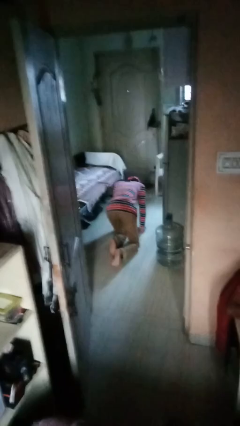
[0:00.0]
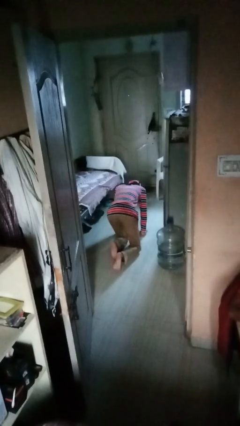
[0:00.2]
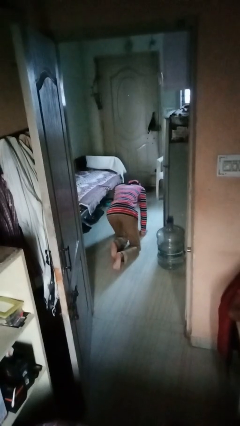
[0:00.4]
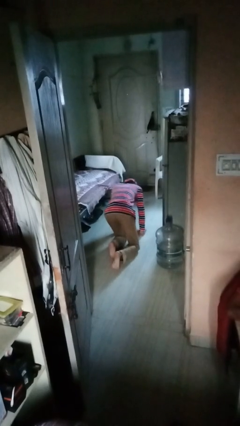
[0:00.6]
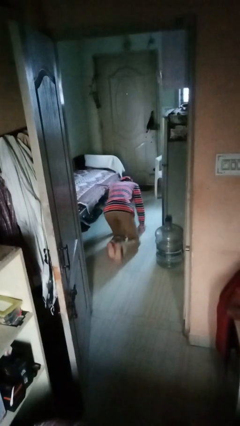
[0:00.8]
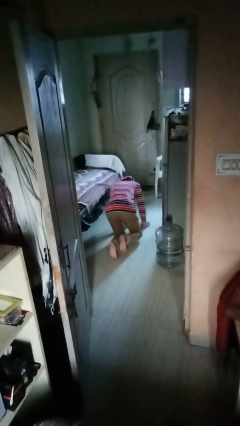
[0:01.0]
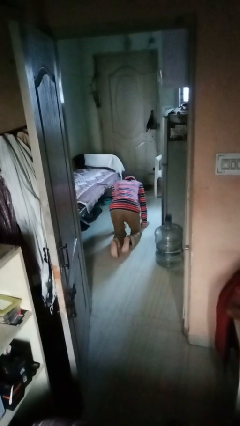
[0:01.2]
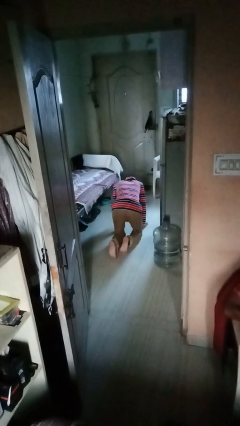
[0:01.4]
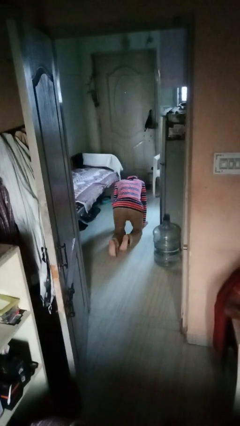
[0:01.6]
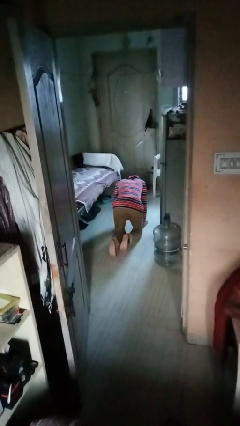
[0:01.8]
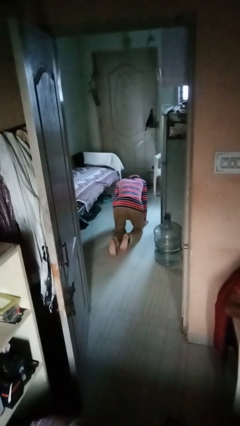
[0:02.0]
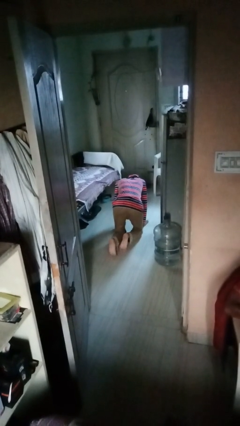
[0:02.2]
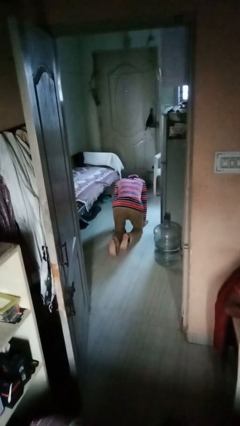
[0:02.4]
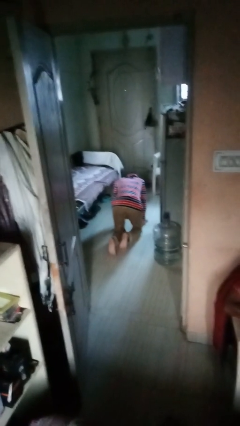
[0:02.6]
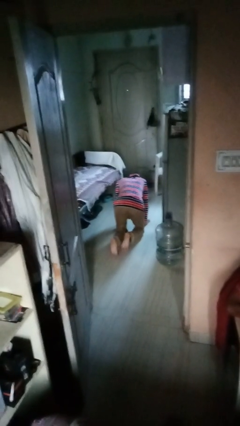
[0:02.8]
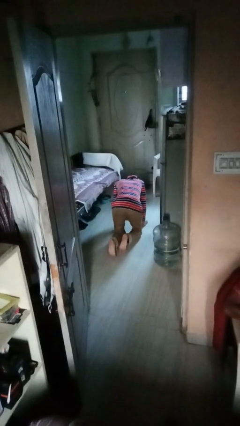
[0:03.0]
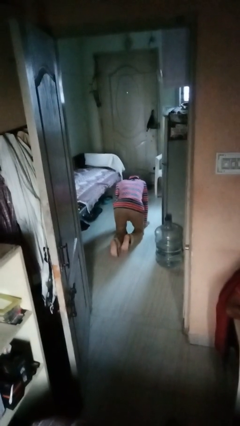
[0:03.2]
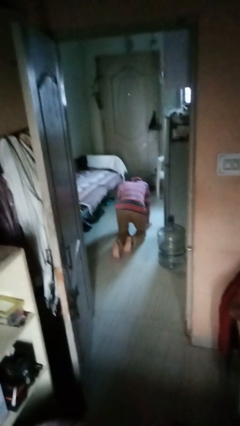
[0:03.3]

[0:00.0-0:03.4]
person crawls

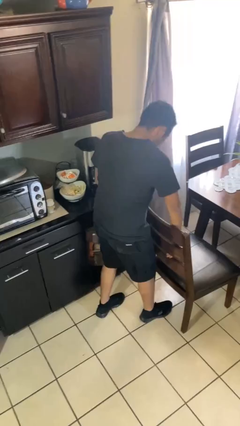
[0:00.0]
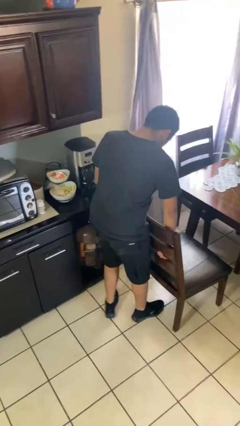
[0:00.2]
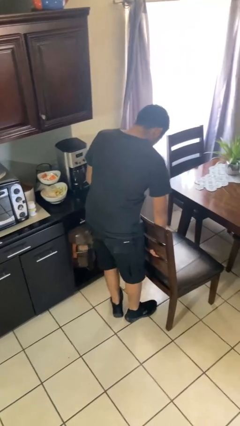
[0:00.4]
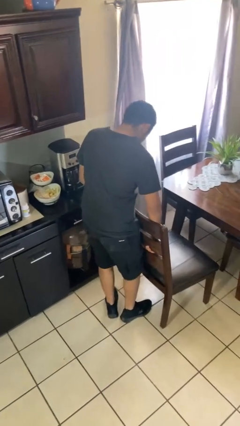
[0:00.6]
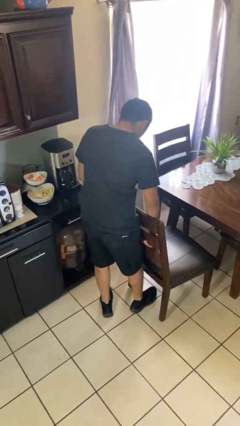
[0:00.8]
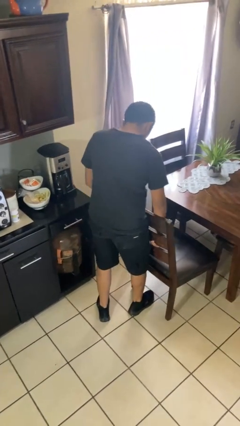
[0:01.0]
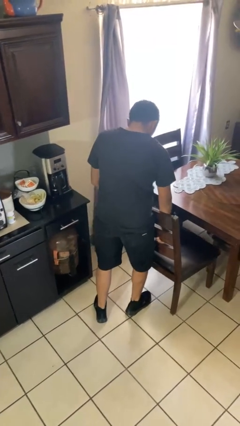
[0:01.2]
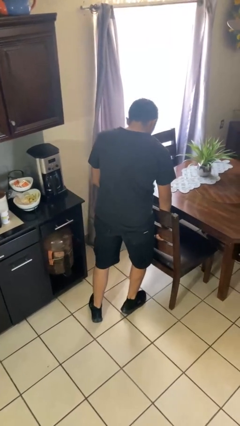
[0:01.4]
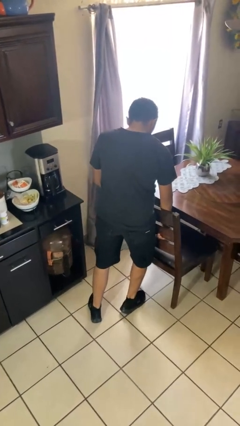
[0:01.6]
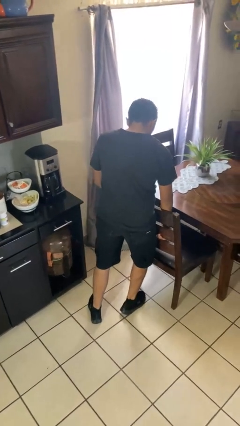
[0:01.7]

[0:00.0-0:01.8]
person pushes in chair

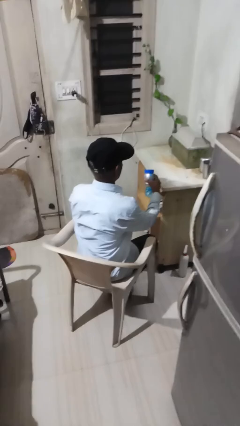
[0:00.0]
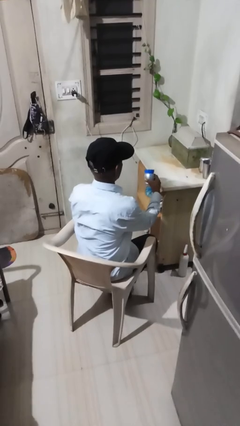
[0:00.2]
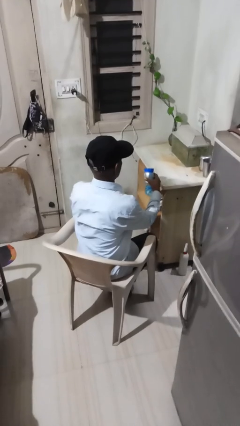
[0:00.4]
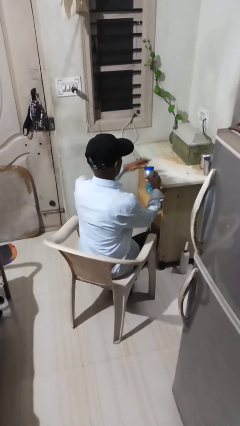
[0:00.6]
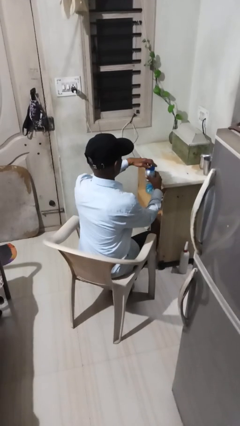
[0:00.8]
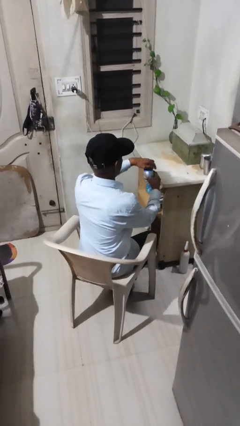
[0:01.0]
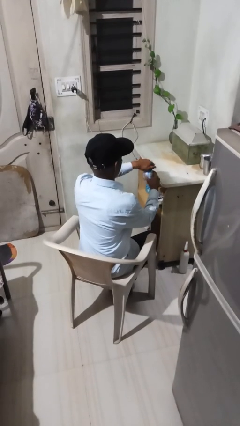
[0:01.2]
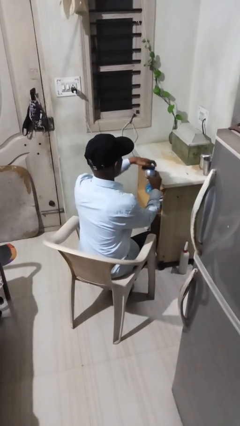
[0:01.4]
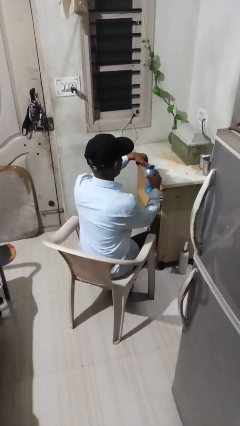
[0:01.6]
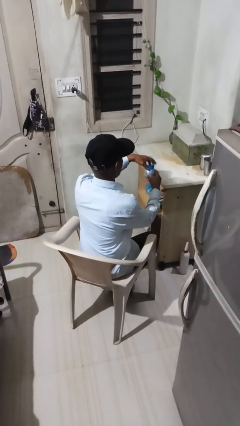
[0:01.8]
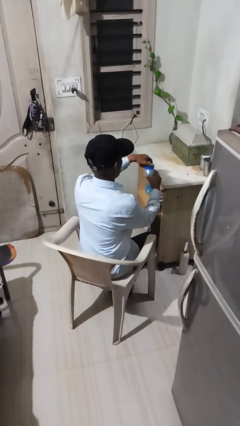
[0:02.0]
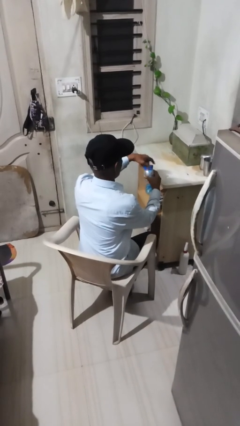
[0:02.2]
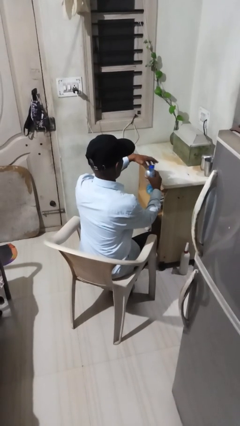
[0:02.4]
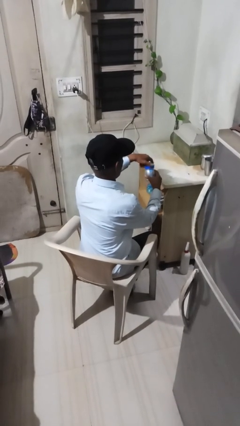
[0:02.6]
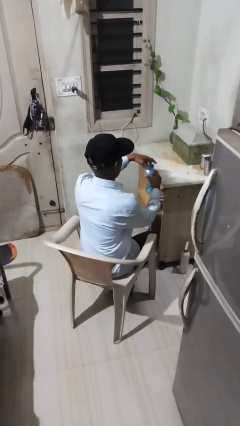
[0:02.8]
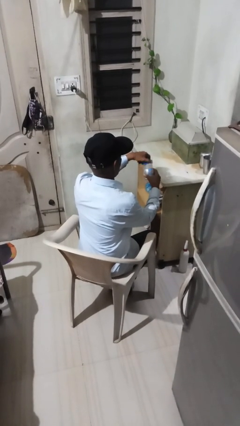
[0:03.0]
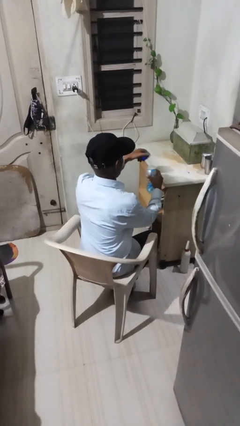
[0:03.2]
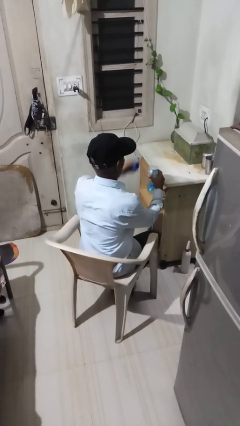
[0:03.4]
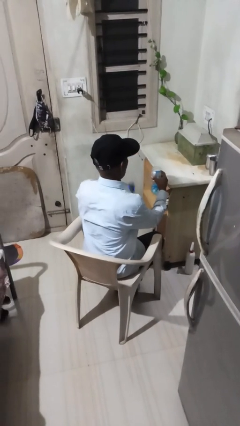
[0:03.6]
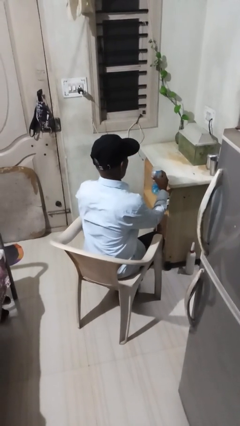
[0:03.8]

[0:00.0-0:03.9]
person opens jar

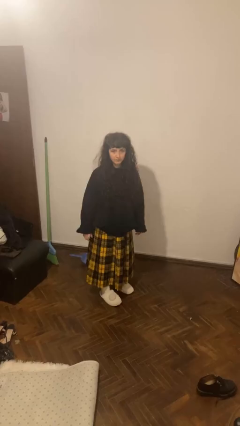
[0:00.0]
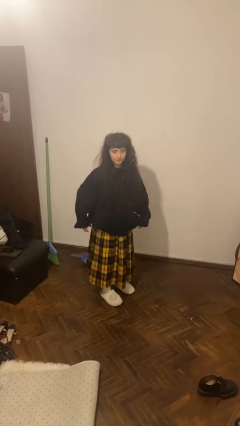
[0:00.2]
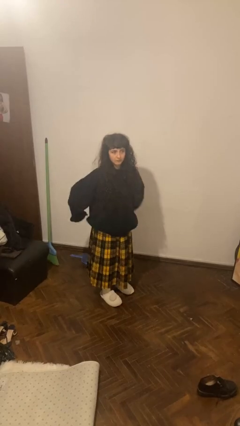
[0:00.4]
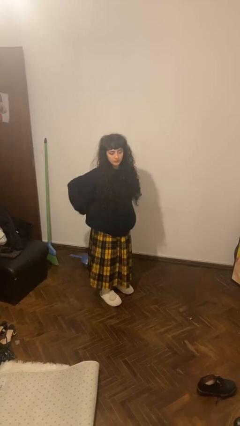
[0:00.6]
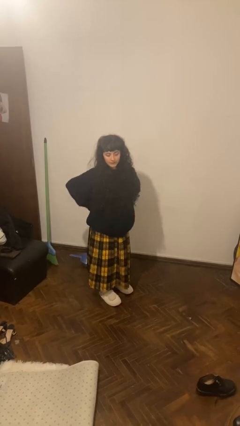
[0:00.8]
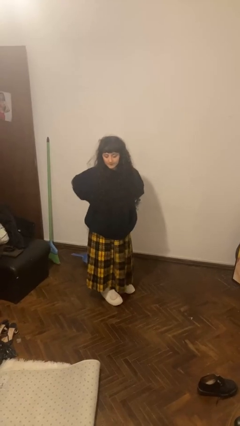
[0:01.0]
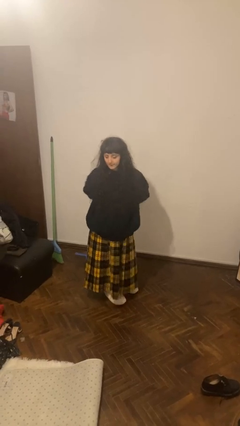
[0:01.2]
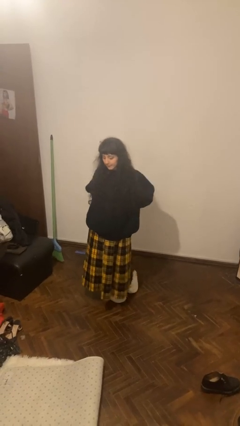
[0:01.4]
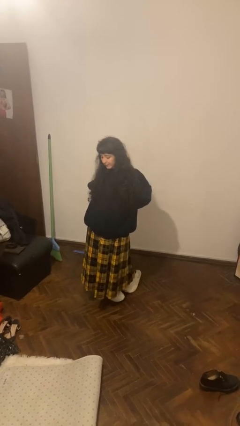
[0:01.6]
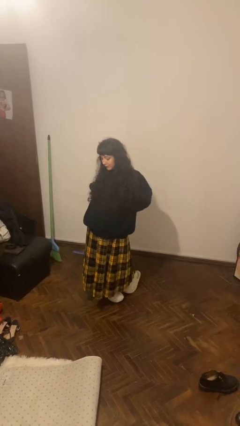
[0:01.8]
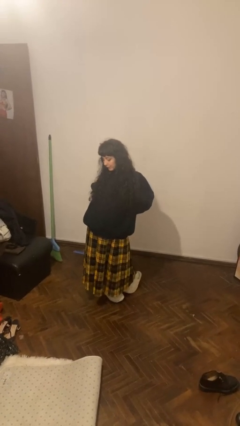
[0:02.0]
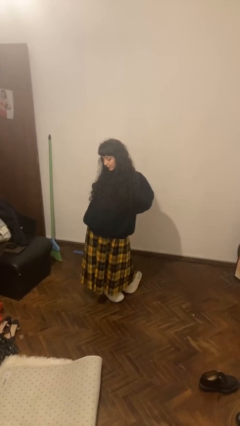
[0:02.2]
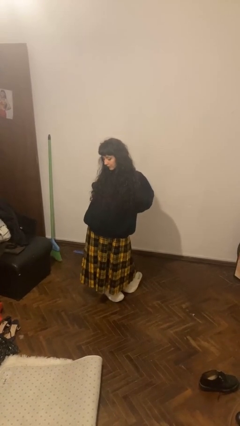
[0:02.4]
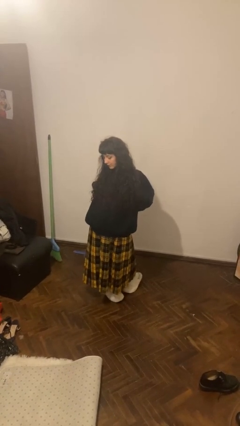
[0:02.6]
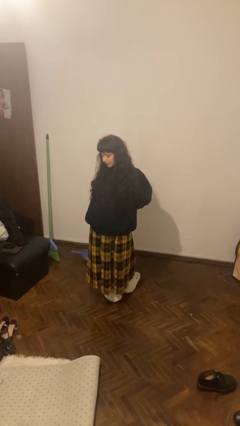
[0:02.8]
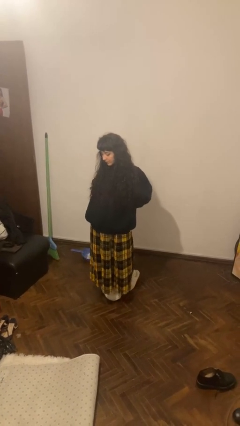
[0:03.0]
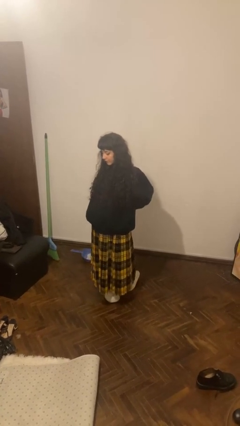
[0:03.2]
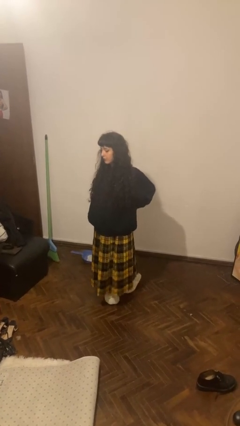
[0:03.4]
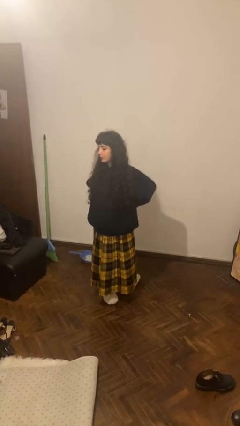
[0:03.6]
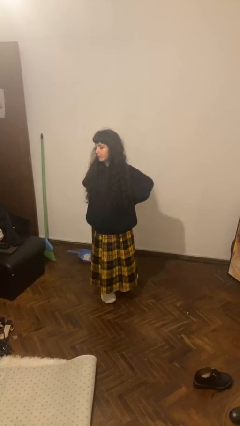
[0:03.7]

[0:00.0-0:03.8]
person stretches back

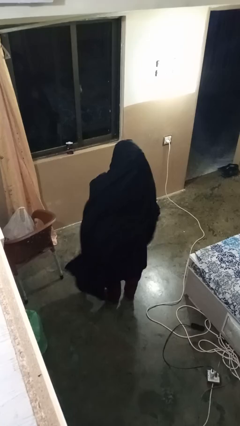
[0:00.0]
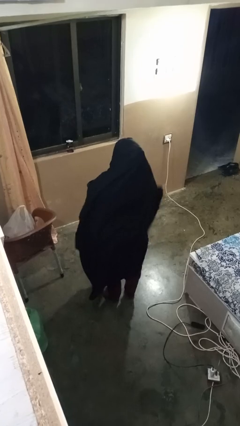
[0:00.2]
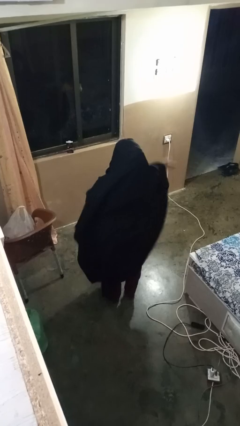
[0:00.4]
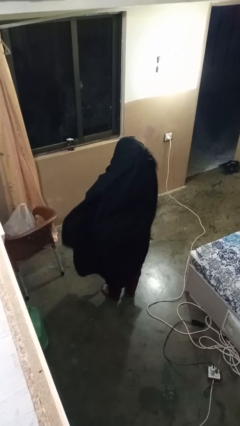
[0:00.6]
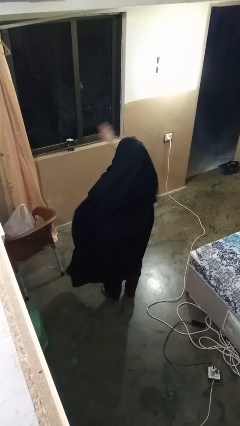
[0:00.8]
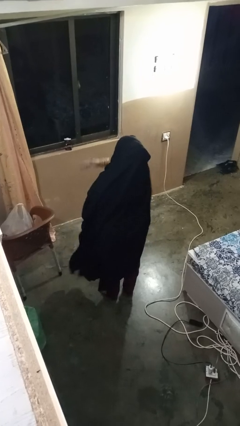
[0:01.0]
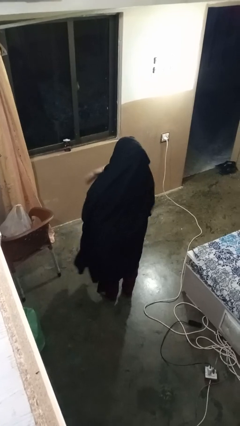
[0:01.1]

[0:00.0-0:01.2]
person gestures swipe left

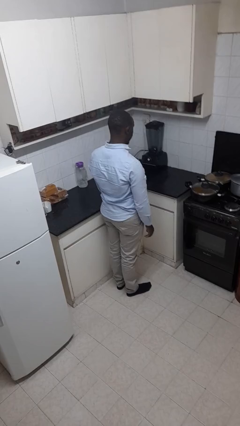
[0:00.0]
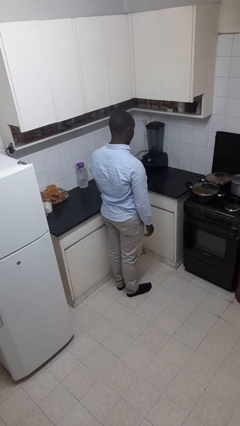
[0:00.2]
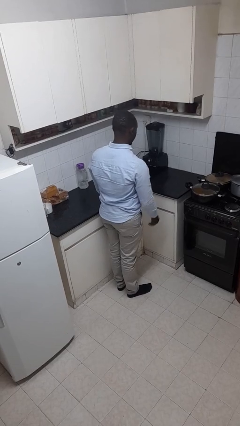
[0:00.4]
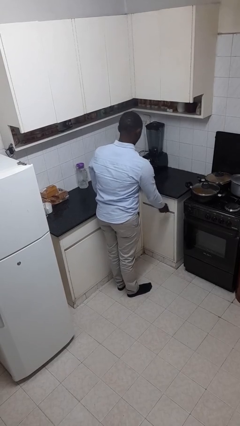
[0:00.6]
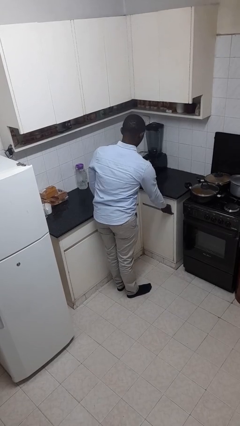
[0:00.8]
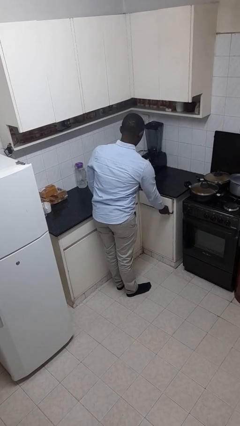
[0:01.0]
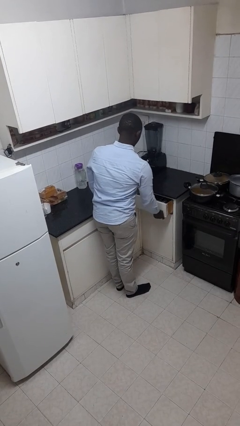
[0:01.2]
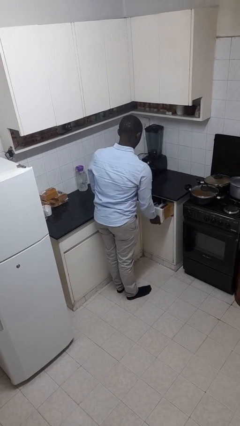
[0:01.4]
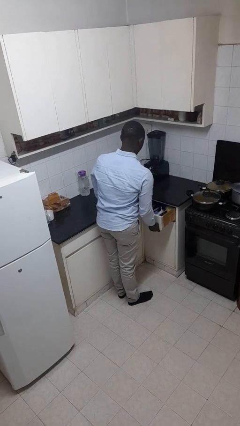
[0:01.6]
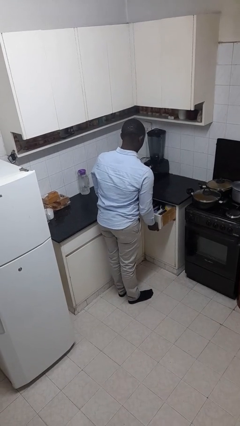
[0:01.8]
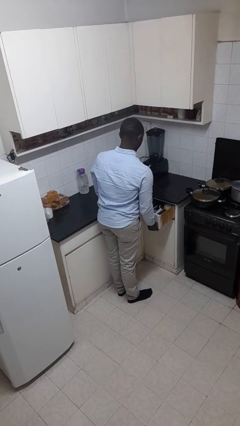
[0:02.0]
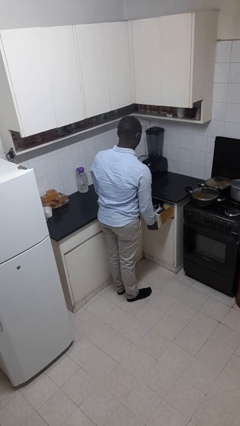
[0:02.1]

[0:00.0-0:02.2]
person opens kitchen drawer

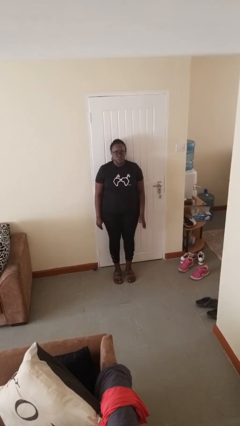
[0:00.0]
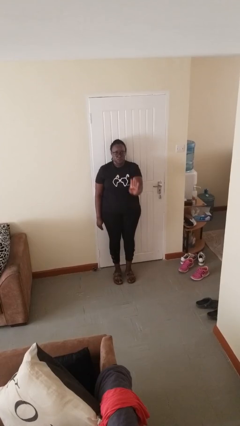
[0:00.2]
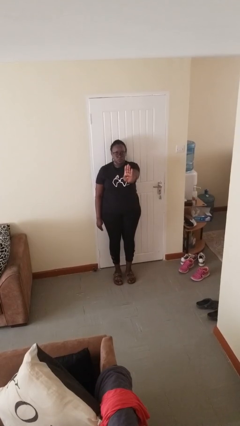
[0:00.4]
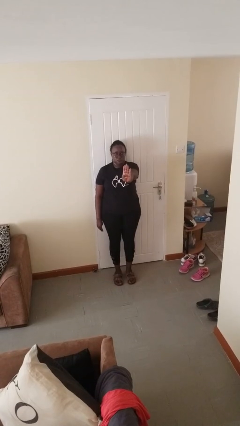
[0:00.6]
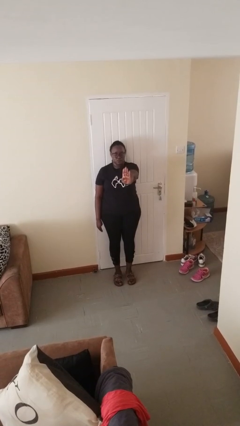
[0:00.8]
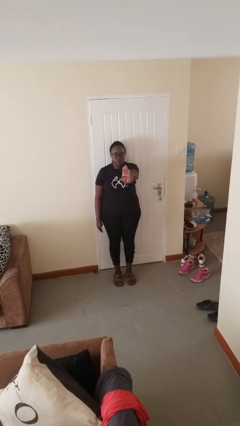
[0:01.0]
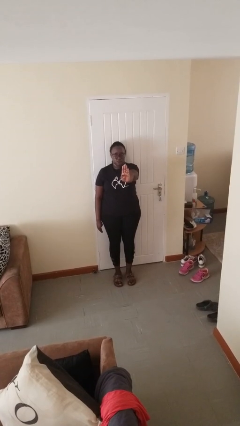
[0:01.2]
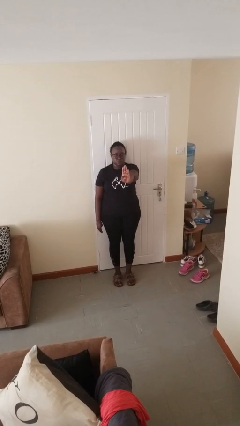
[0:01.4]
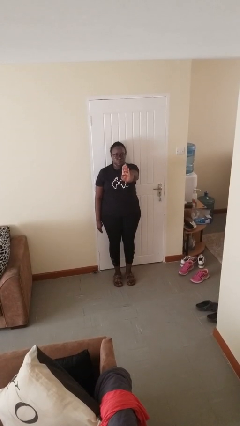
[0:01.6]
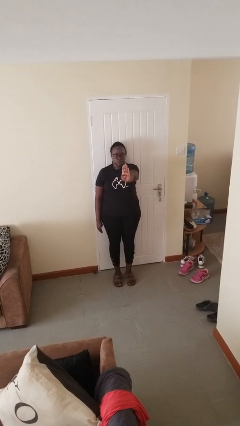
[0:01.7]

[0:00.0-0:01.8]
person gestures number four
